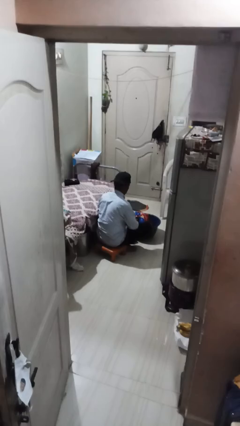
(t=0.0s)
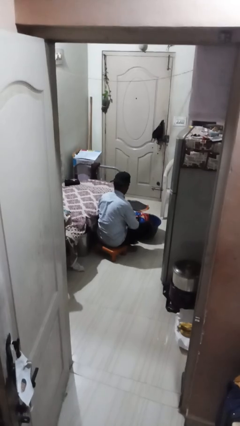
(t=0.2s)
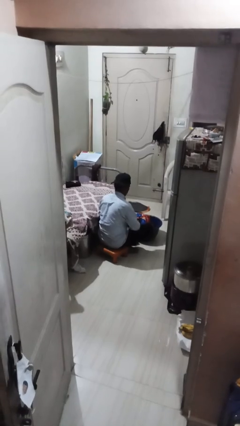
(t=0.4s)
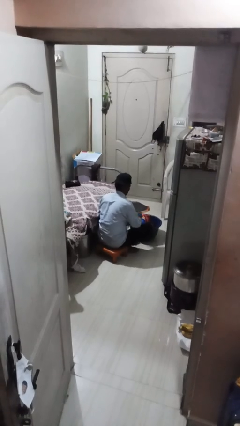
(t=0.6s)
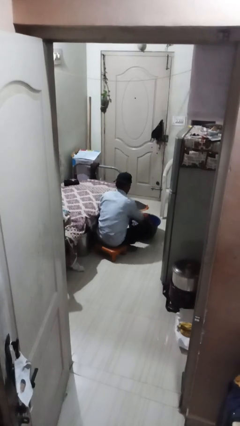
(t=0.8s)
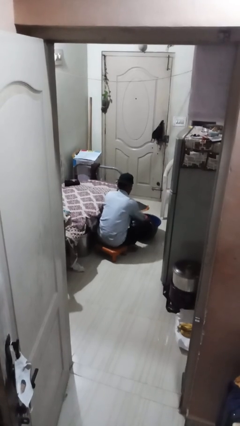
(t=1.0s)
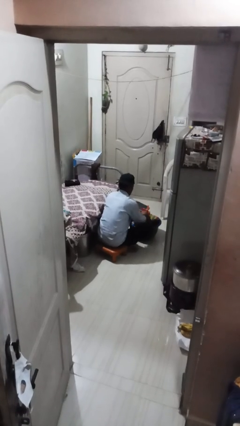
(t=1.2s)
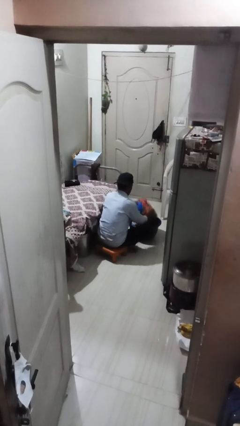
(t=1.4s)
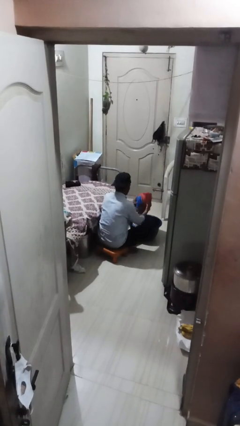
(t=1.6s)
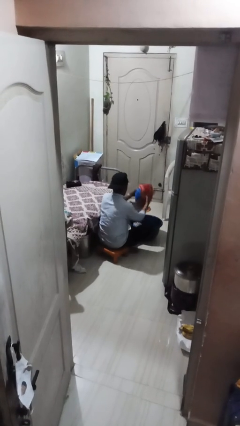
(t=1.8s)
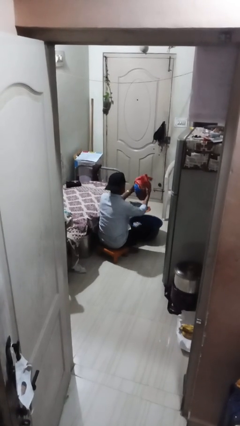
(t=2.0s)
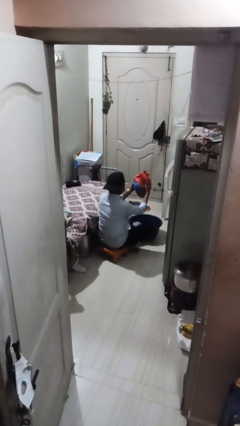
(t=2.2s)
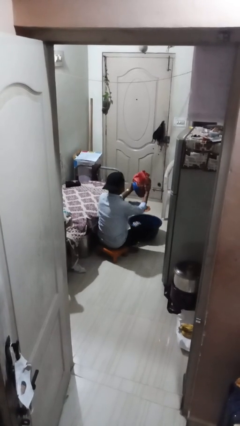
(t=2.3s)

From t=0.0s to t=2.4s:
person takes object from basket

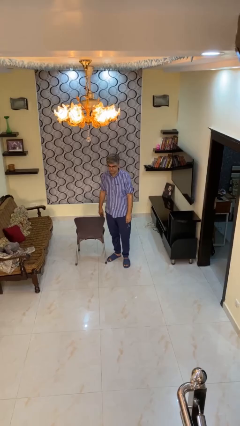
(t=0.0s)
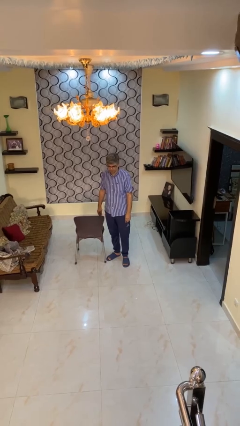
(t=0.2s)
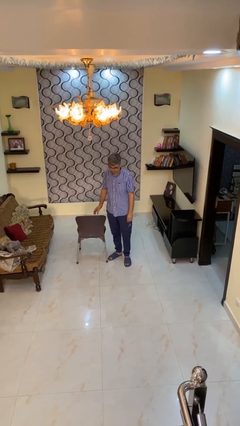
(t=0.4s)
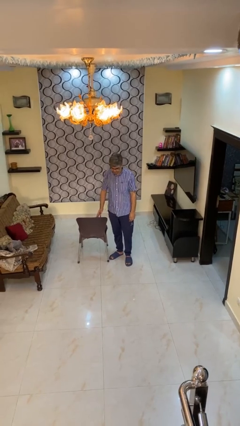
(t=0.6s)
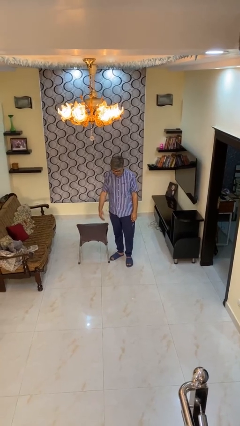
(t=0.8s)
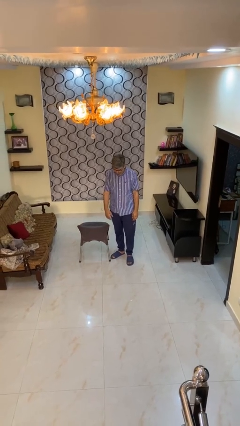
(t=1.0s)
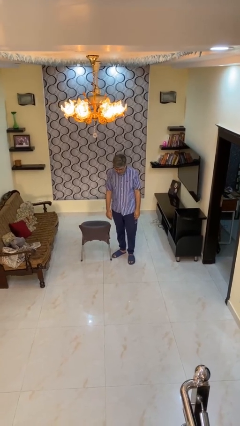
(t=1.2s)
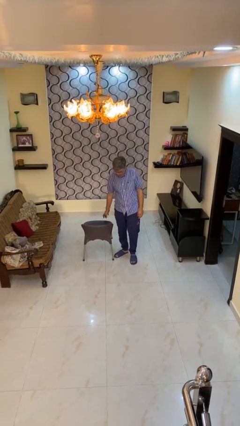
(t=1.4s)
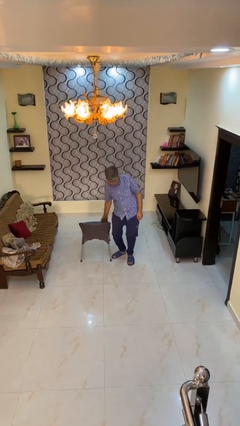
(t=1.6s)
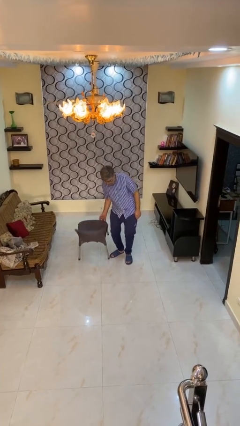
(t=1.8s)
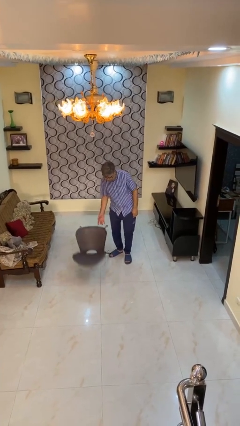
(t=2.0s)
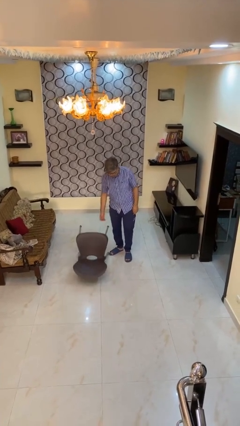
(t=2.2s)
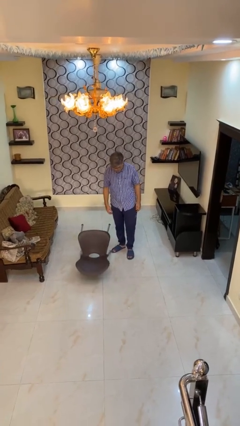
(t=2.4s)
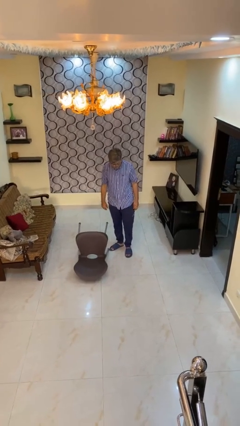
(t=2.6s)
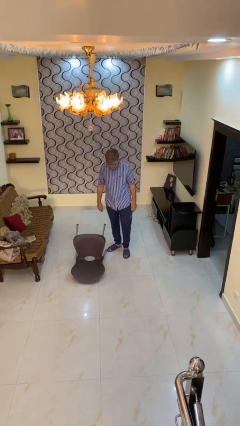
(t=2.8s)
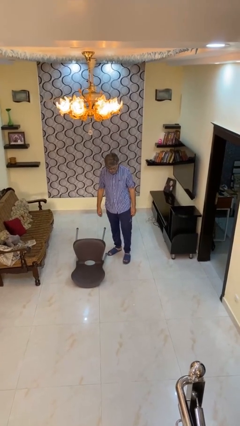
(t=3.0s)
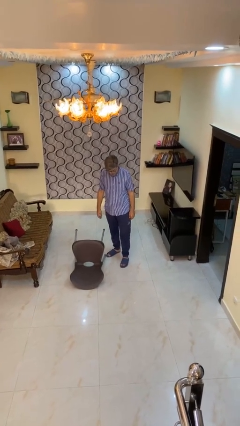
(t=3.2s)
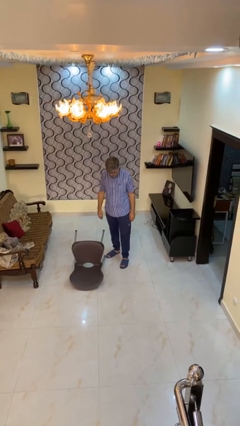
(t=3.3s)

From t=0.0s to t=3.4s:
person knocks over furniture

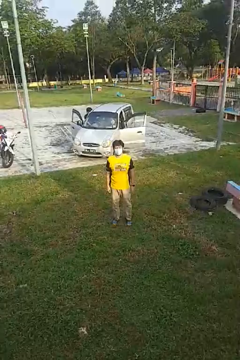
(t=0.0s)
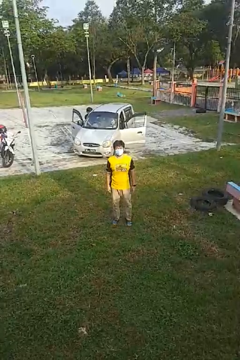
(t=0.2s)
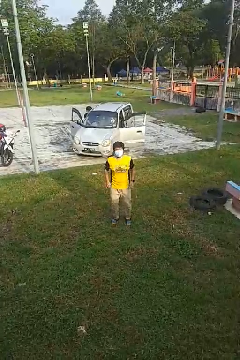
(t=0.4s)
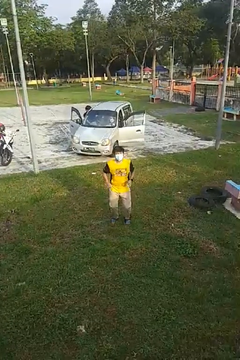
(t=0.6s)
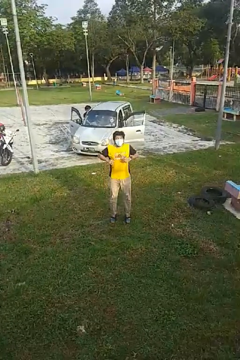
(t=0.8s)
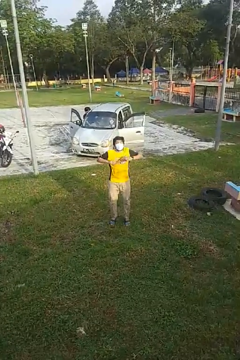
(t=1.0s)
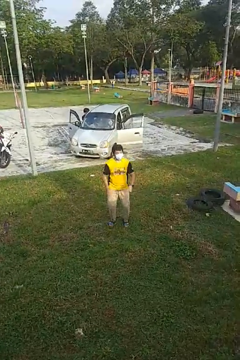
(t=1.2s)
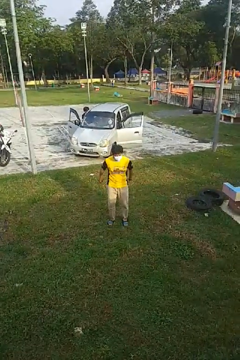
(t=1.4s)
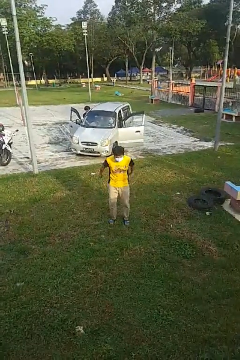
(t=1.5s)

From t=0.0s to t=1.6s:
person jumps

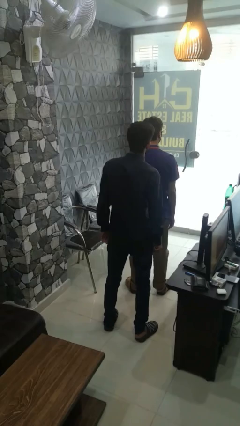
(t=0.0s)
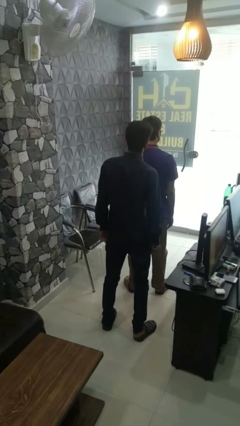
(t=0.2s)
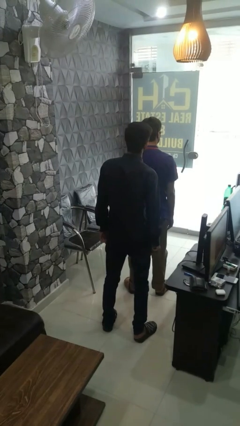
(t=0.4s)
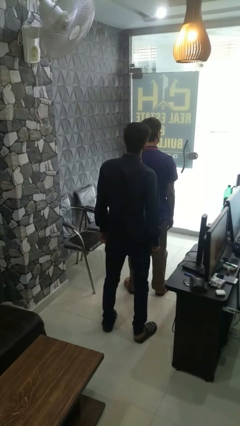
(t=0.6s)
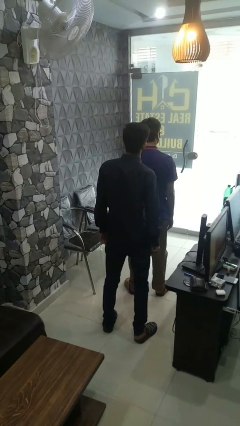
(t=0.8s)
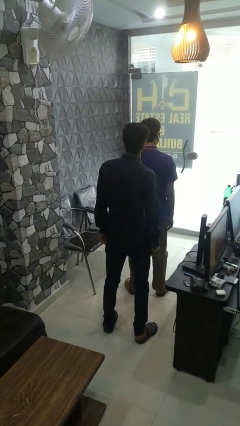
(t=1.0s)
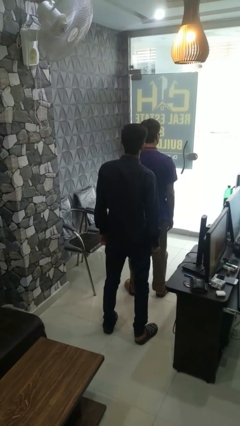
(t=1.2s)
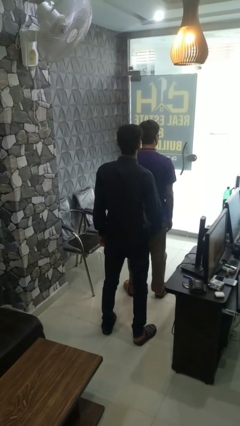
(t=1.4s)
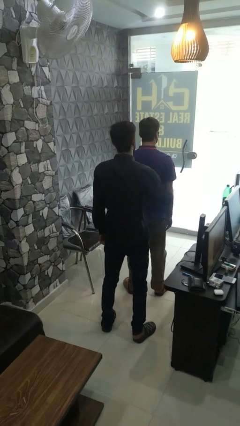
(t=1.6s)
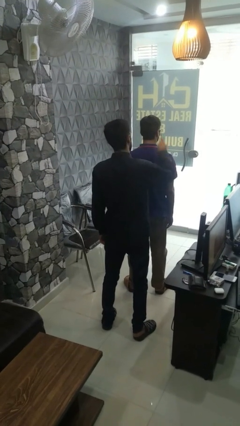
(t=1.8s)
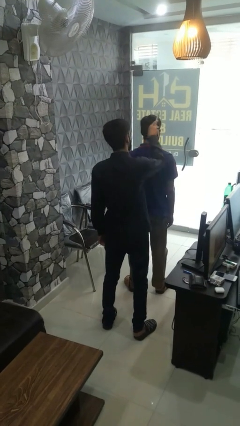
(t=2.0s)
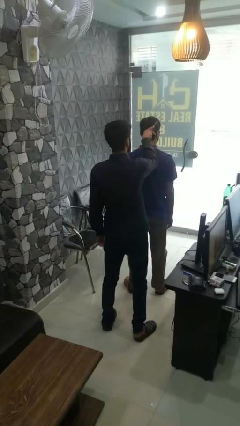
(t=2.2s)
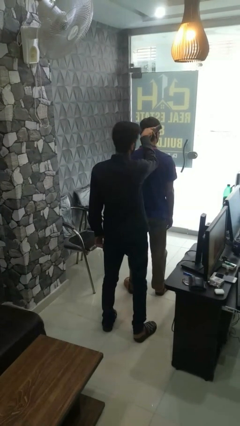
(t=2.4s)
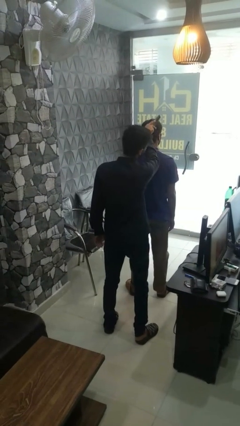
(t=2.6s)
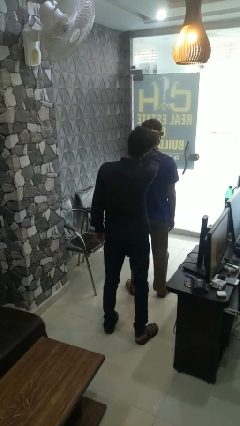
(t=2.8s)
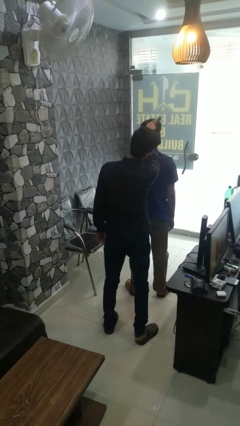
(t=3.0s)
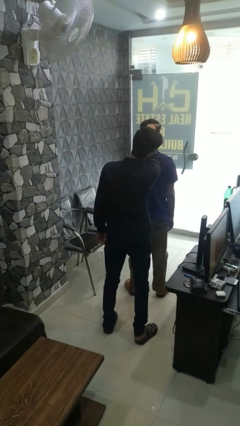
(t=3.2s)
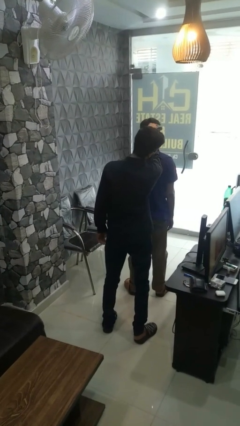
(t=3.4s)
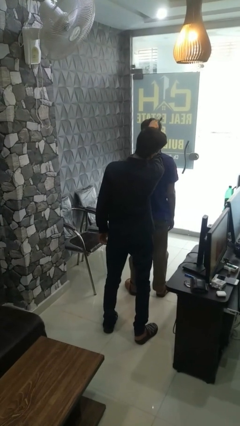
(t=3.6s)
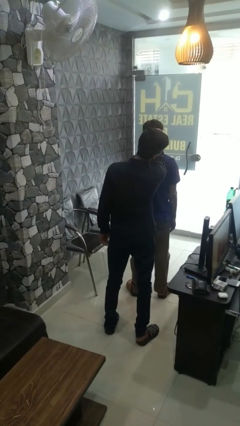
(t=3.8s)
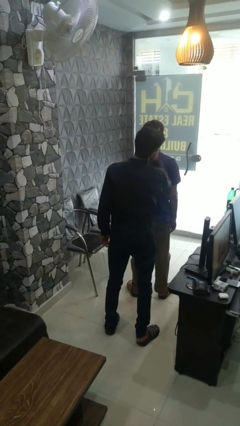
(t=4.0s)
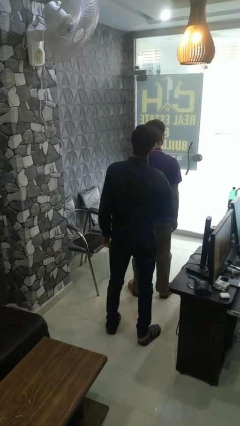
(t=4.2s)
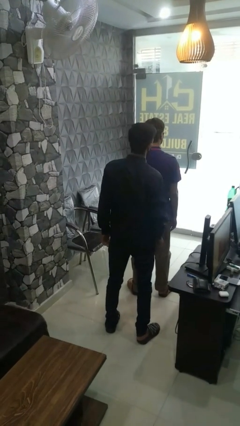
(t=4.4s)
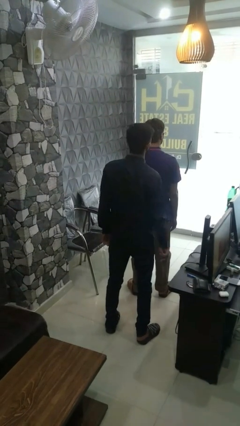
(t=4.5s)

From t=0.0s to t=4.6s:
person brushes hair of person

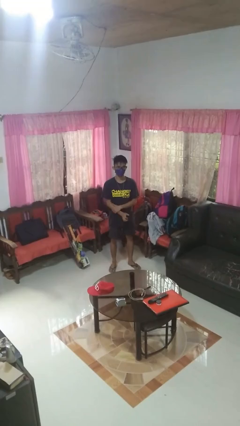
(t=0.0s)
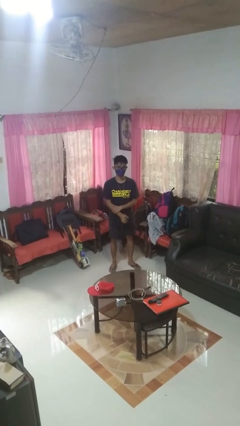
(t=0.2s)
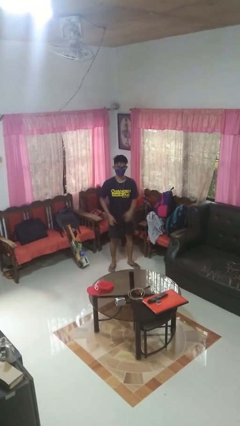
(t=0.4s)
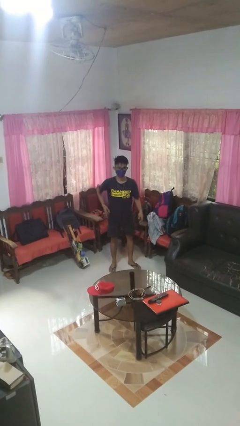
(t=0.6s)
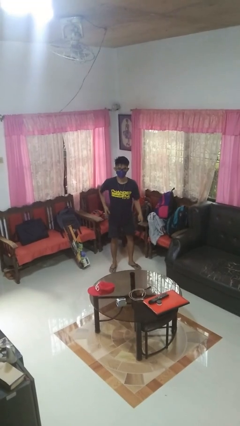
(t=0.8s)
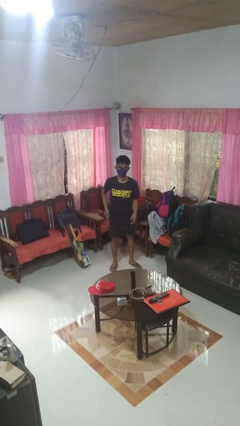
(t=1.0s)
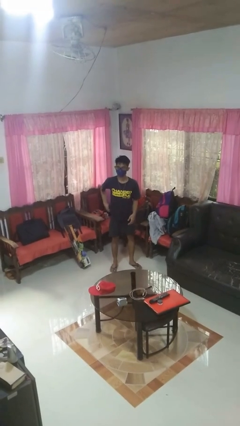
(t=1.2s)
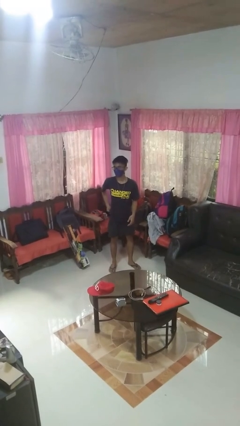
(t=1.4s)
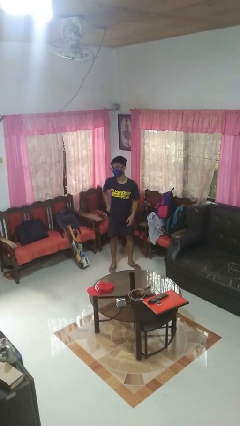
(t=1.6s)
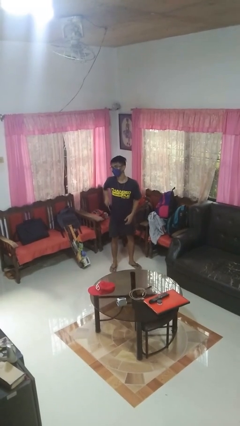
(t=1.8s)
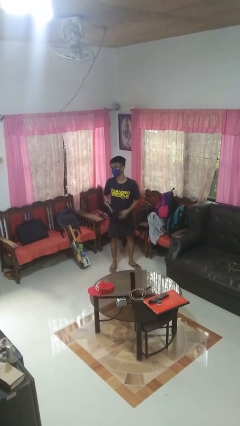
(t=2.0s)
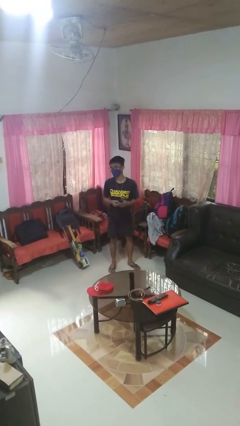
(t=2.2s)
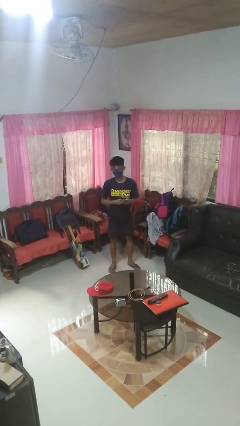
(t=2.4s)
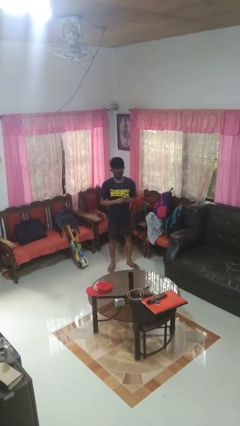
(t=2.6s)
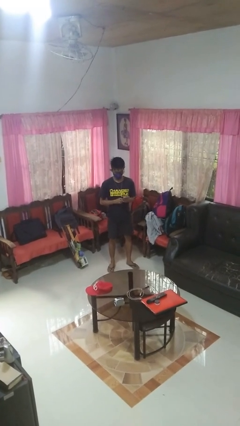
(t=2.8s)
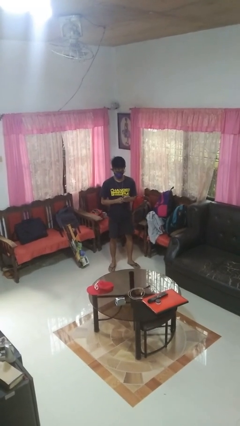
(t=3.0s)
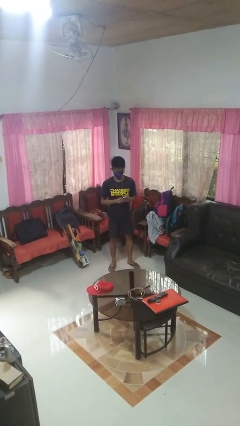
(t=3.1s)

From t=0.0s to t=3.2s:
person takes phone from pocket

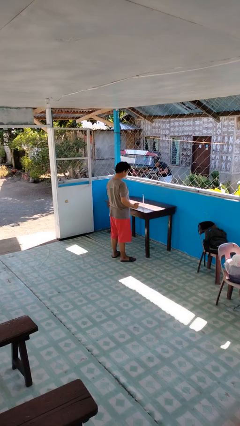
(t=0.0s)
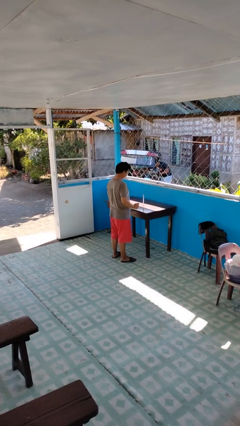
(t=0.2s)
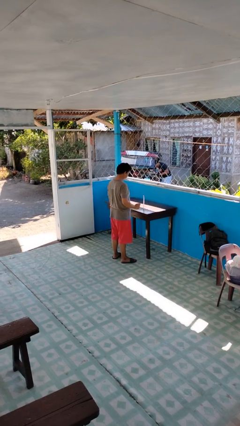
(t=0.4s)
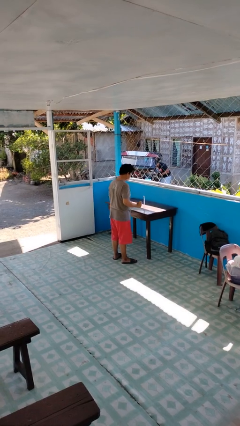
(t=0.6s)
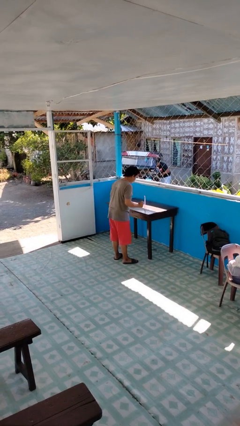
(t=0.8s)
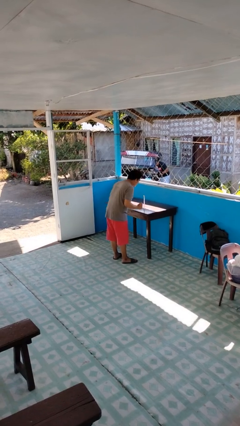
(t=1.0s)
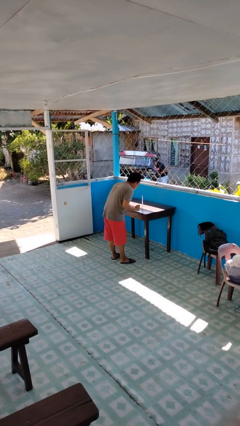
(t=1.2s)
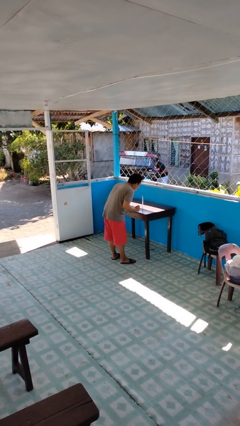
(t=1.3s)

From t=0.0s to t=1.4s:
person extinguishes candle

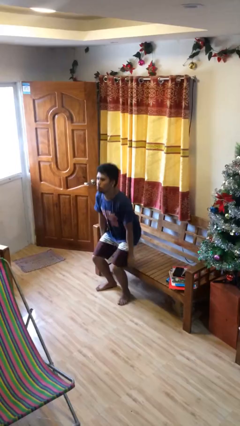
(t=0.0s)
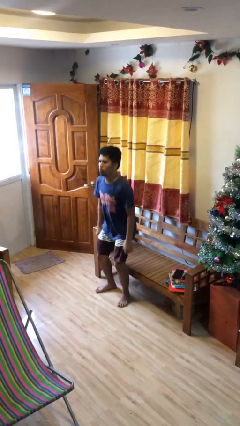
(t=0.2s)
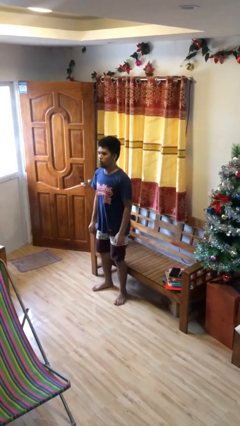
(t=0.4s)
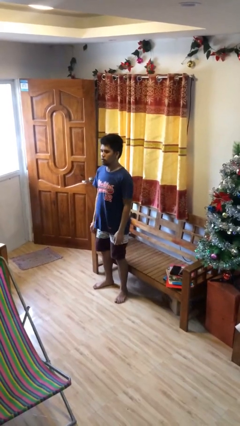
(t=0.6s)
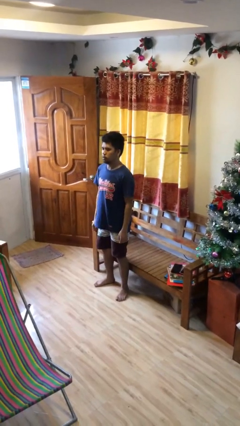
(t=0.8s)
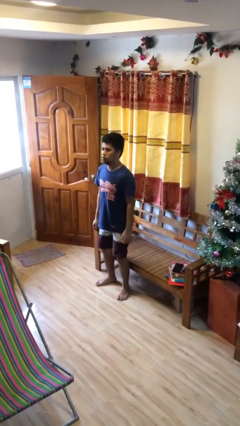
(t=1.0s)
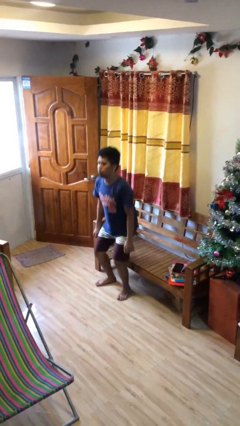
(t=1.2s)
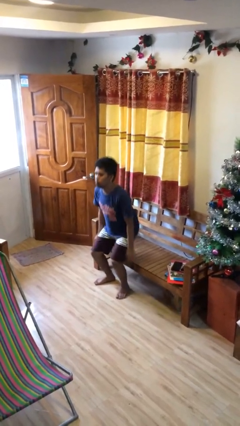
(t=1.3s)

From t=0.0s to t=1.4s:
person stands up
